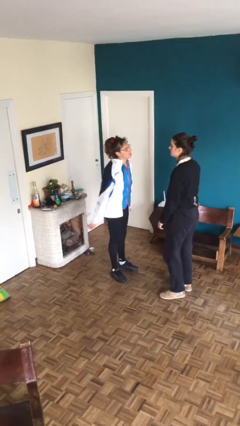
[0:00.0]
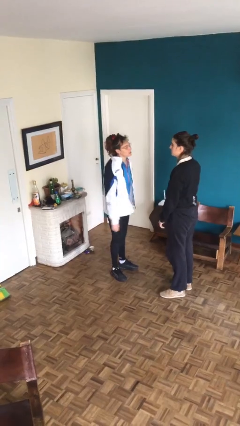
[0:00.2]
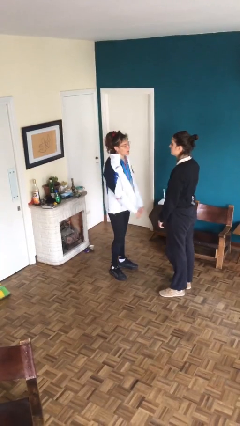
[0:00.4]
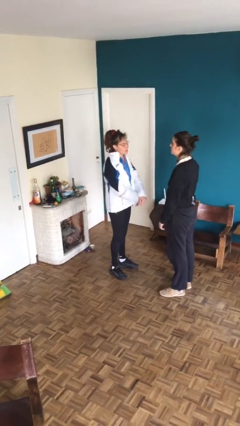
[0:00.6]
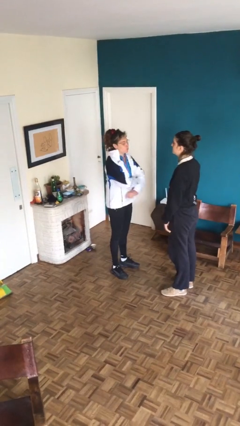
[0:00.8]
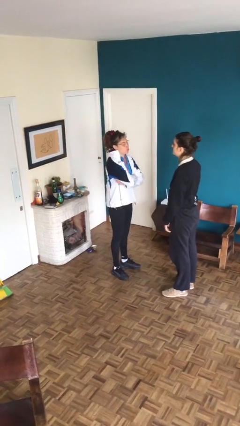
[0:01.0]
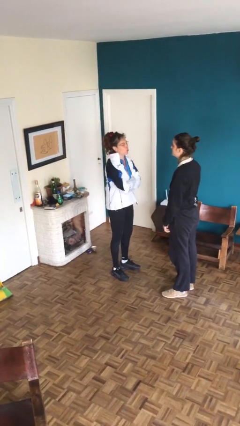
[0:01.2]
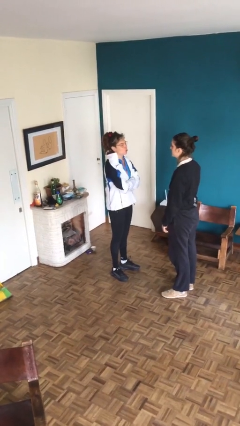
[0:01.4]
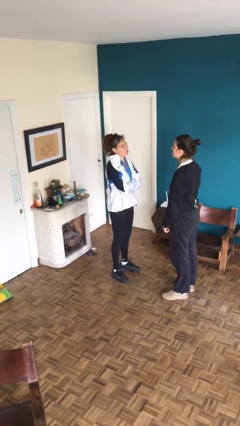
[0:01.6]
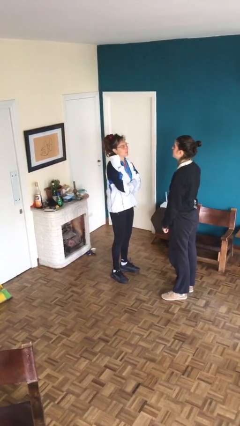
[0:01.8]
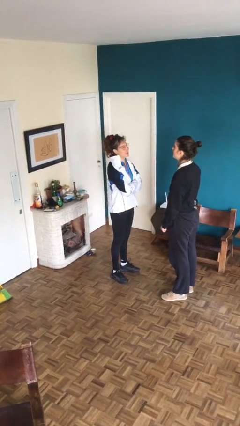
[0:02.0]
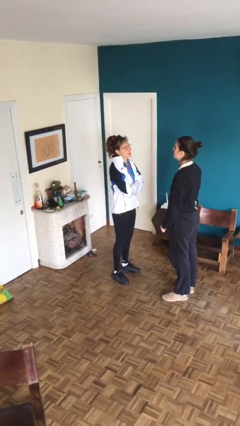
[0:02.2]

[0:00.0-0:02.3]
person talks to person

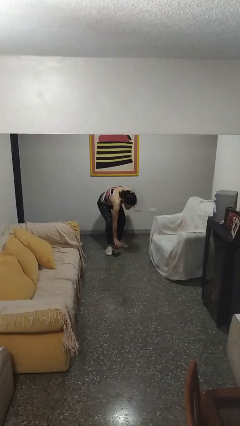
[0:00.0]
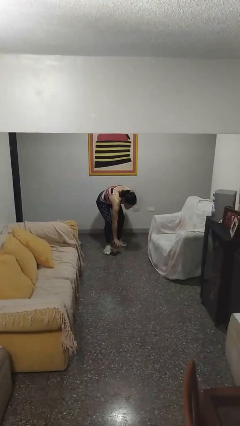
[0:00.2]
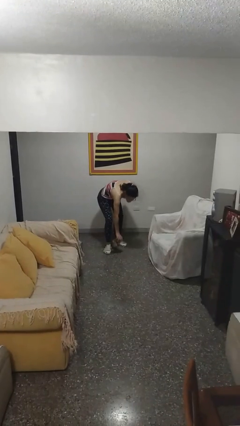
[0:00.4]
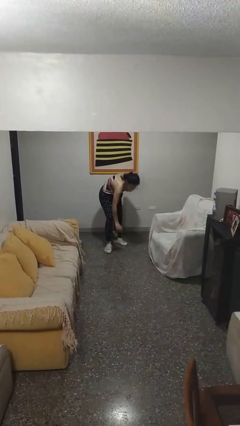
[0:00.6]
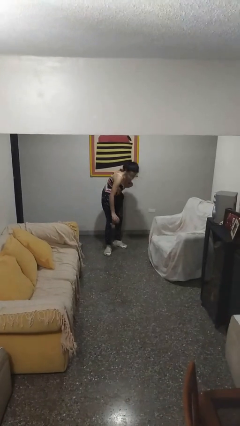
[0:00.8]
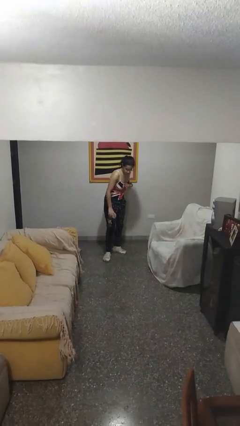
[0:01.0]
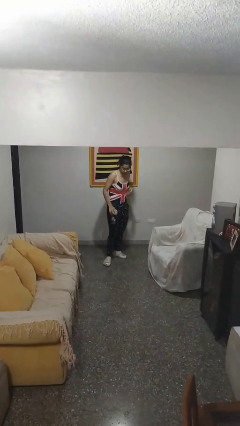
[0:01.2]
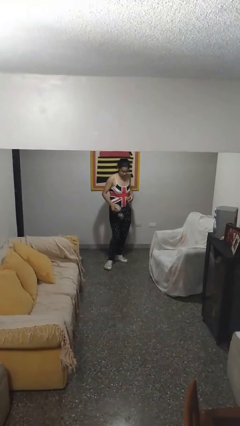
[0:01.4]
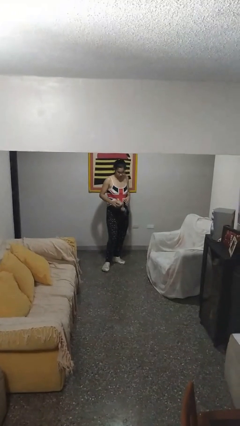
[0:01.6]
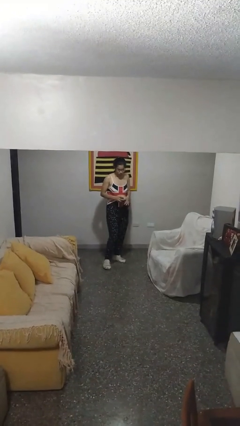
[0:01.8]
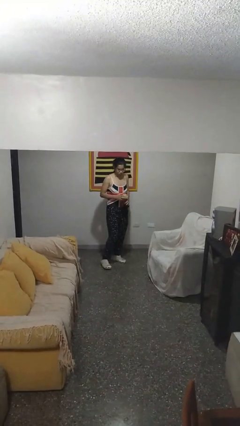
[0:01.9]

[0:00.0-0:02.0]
person picks up object from floor

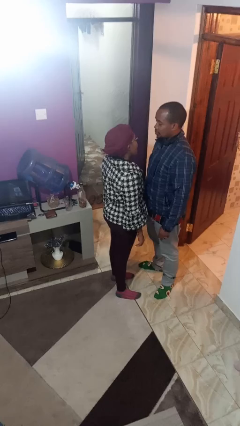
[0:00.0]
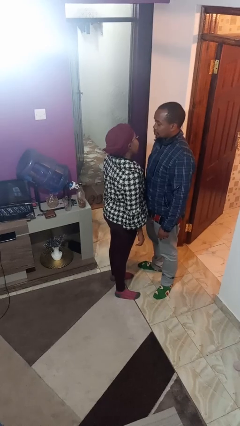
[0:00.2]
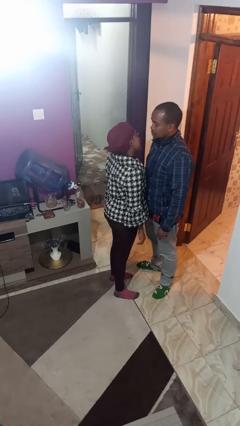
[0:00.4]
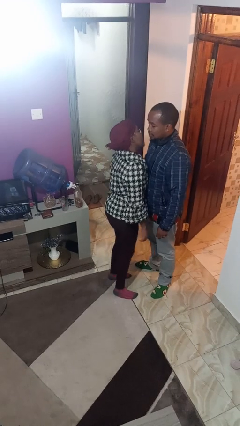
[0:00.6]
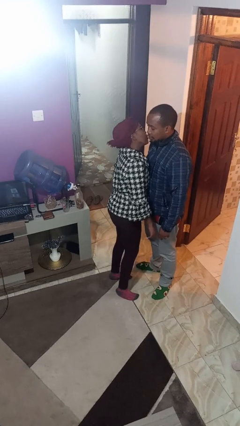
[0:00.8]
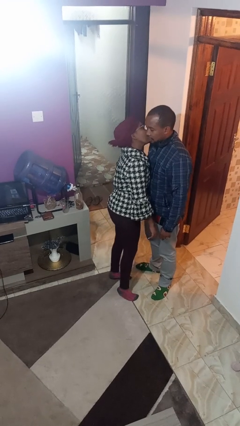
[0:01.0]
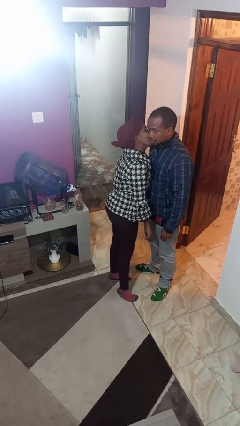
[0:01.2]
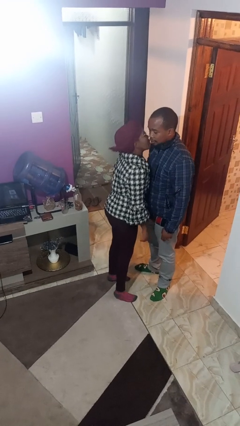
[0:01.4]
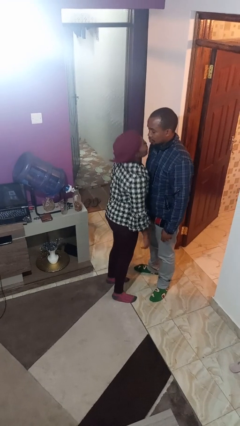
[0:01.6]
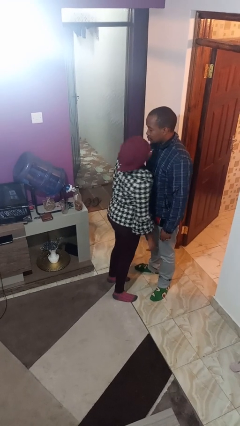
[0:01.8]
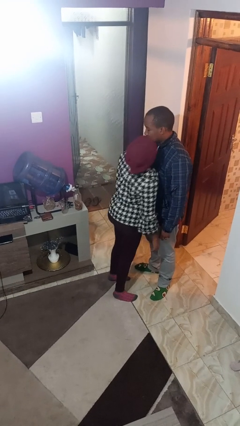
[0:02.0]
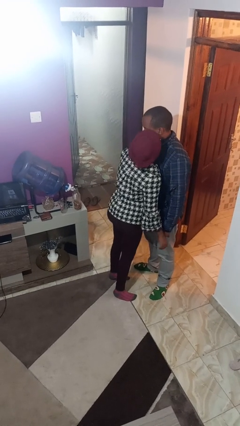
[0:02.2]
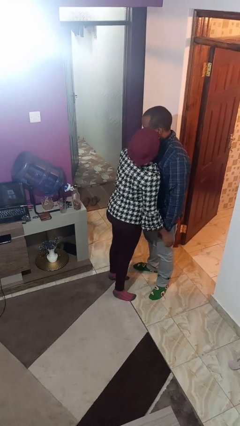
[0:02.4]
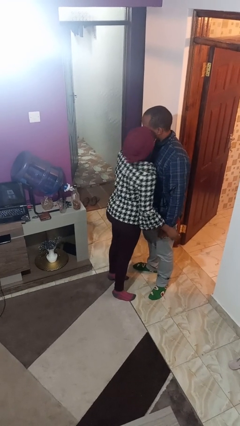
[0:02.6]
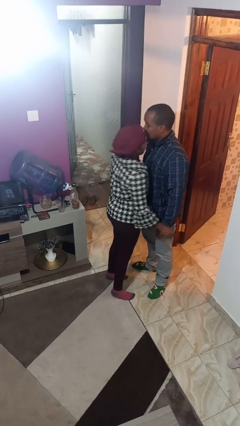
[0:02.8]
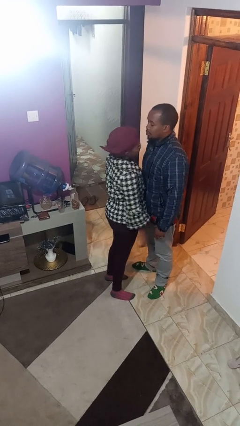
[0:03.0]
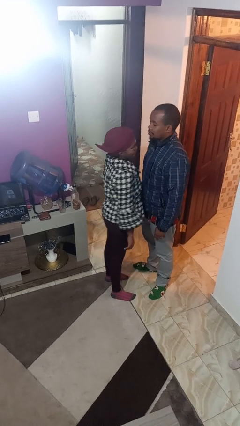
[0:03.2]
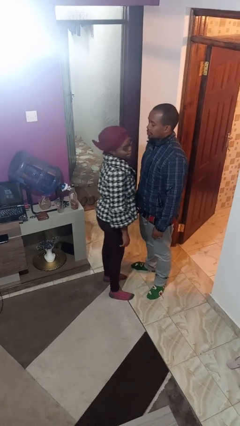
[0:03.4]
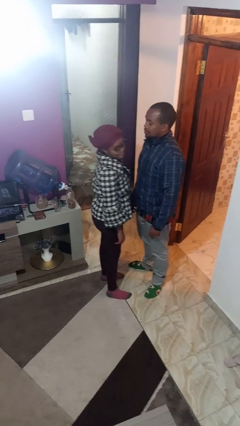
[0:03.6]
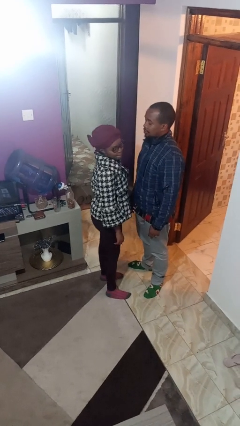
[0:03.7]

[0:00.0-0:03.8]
person kisses cheek of person

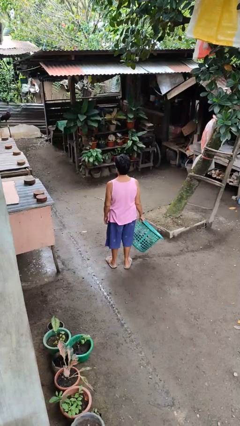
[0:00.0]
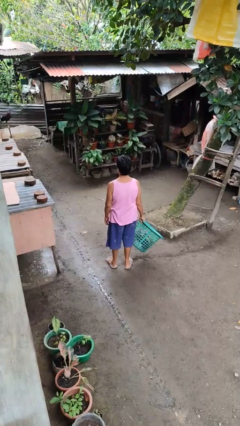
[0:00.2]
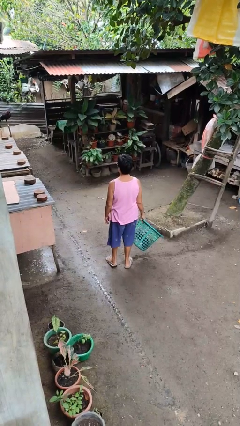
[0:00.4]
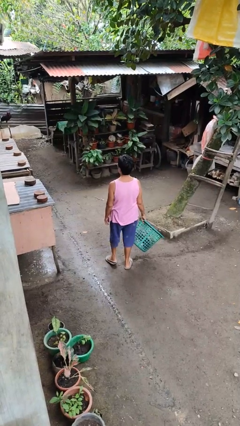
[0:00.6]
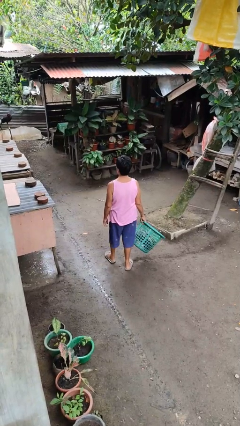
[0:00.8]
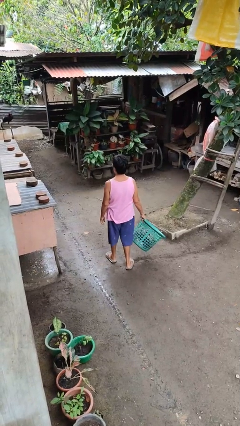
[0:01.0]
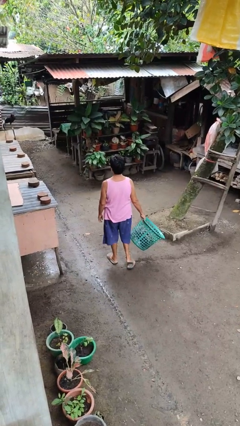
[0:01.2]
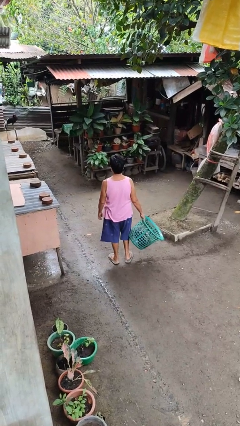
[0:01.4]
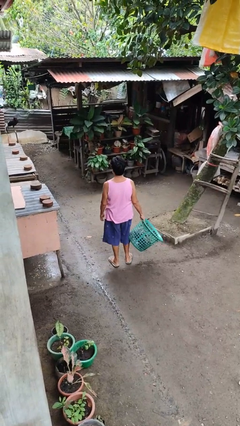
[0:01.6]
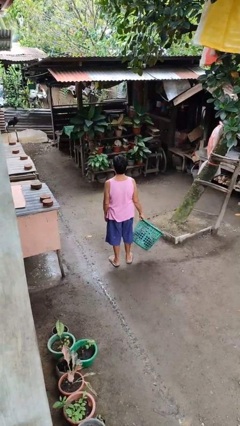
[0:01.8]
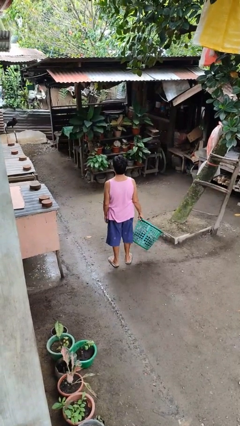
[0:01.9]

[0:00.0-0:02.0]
person carries laundry basket

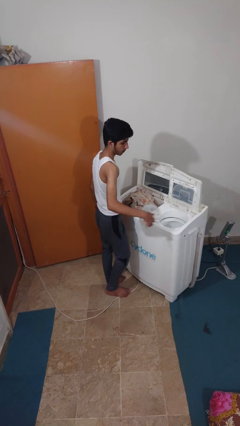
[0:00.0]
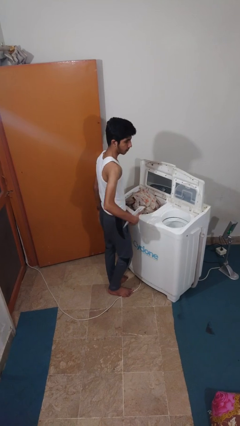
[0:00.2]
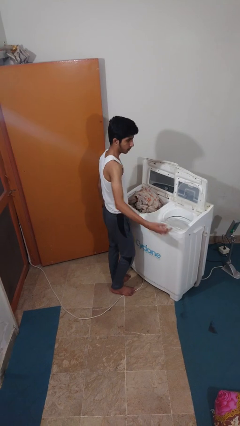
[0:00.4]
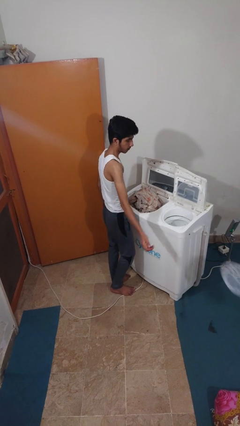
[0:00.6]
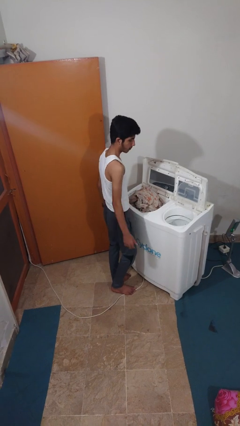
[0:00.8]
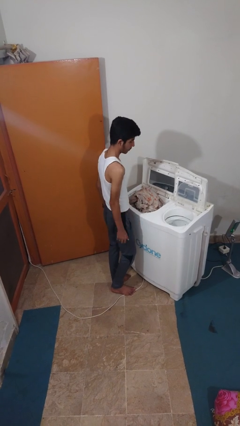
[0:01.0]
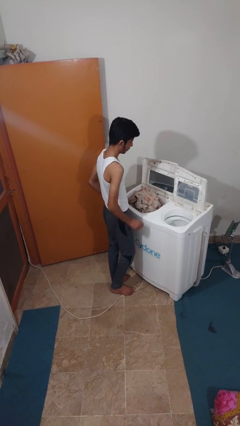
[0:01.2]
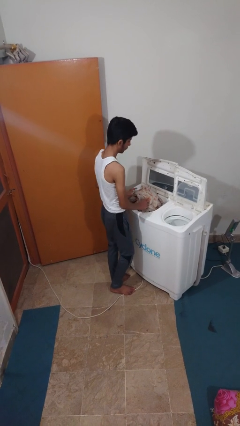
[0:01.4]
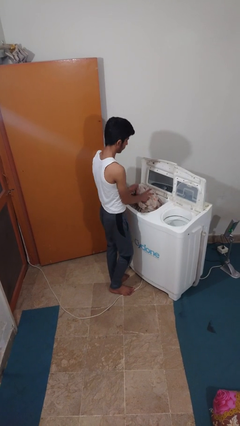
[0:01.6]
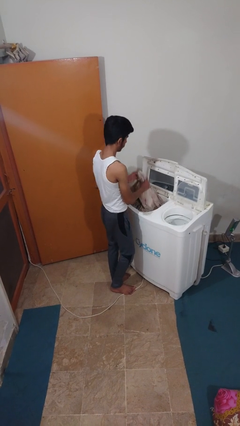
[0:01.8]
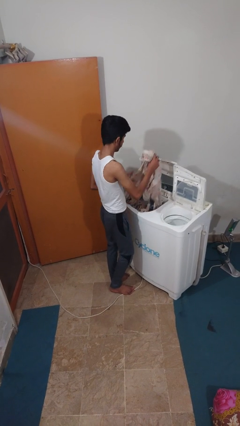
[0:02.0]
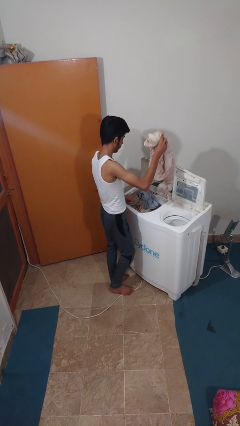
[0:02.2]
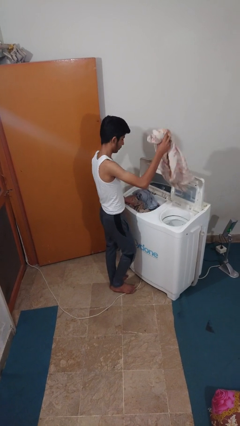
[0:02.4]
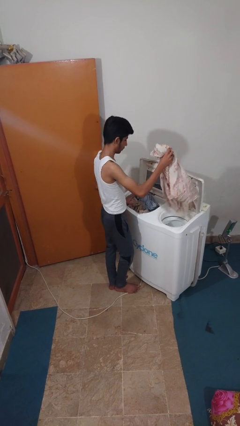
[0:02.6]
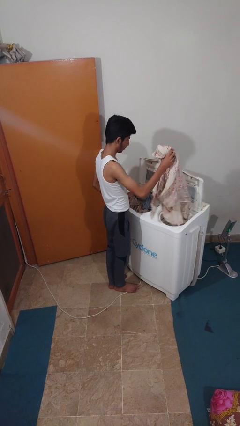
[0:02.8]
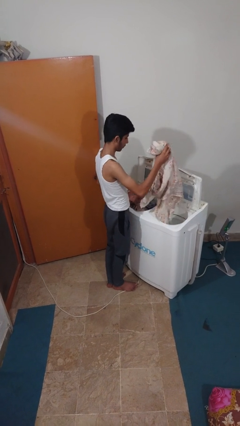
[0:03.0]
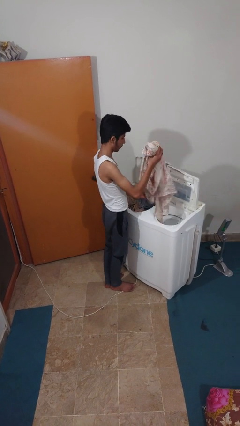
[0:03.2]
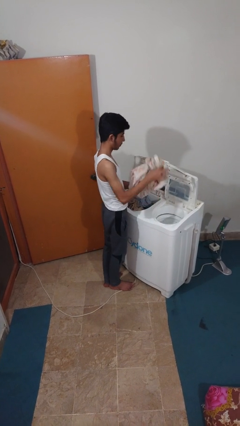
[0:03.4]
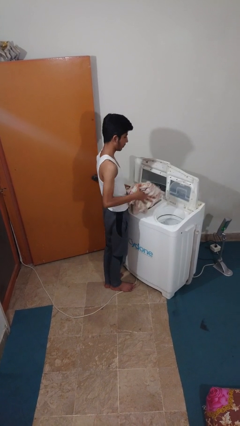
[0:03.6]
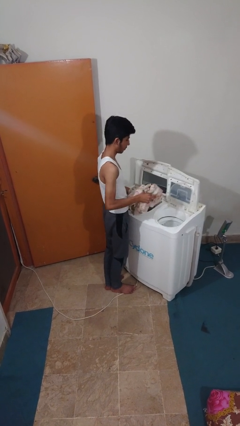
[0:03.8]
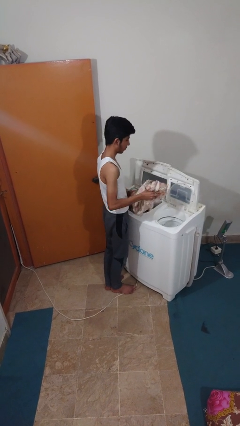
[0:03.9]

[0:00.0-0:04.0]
person unloads clotheswasher

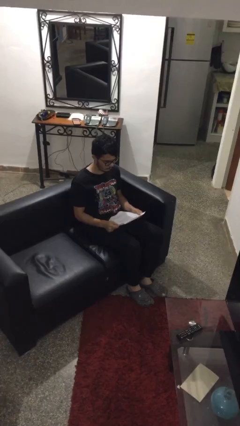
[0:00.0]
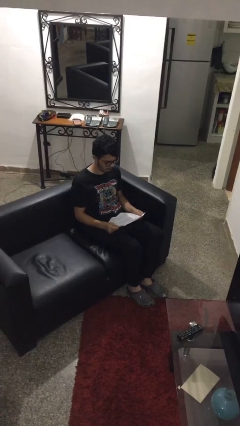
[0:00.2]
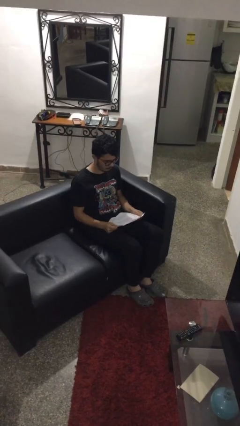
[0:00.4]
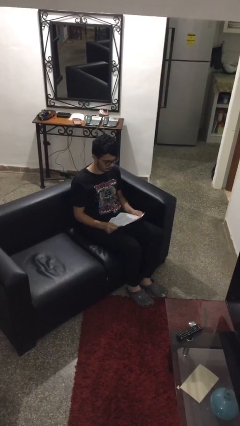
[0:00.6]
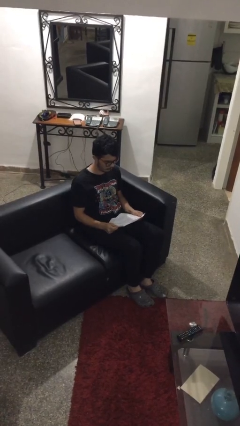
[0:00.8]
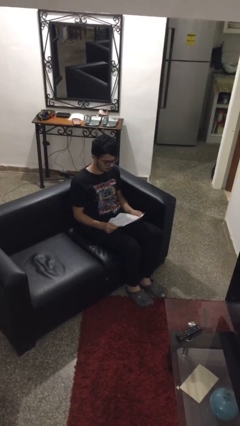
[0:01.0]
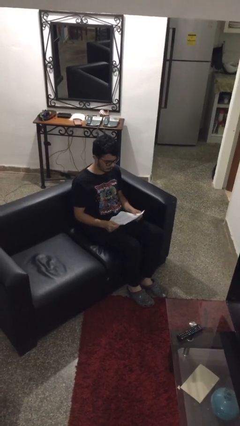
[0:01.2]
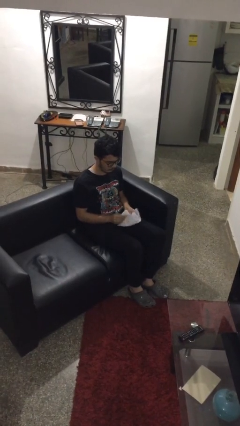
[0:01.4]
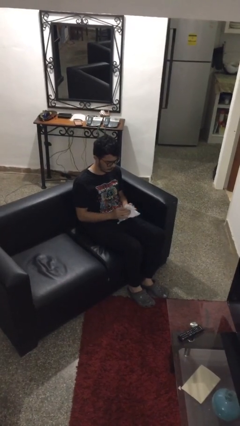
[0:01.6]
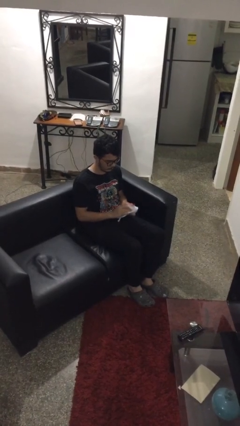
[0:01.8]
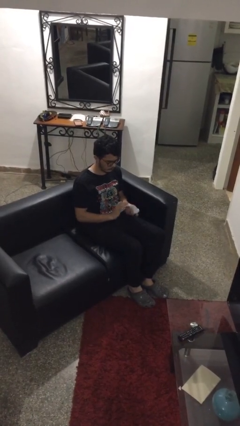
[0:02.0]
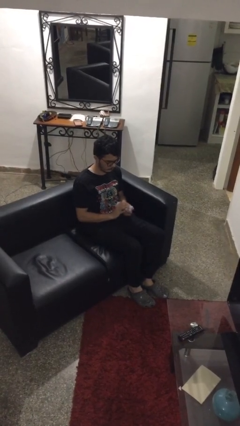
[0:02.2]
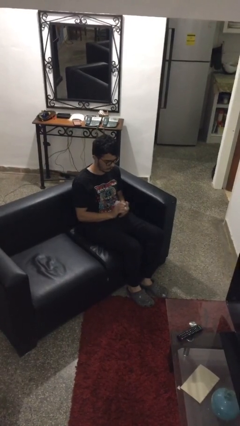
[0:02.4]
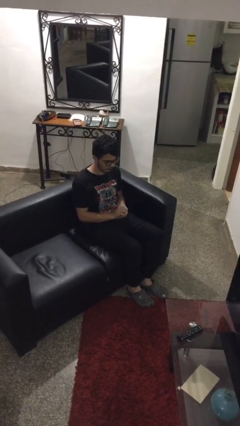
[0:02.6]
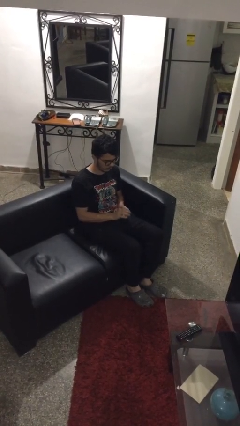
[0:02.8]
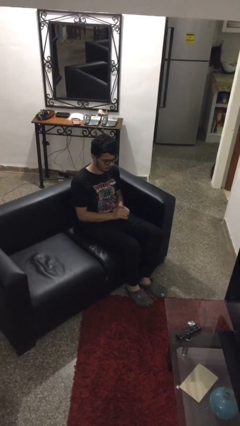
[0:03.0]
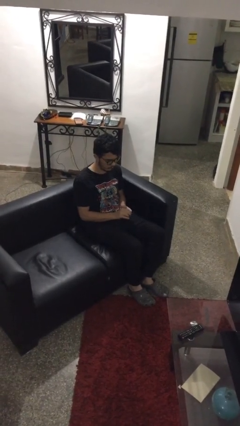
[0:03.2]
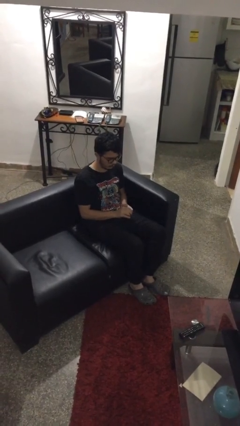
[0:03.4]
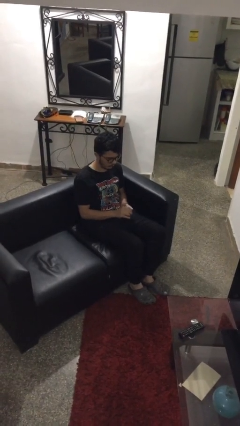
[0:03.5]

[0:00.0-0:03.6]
person crumples paper
